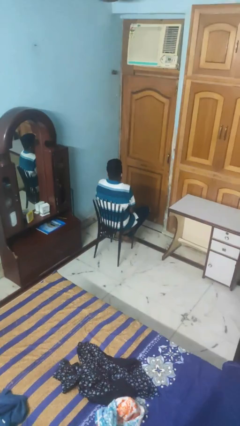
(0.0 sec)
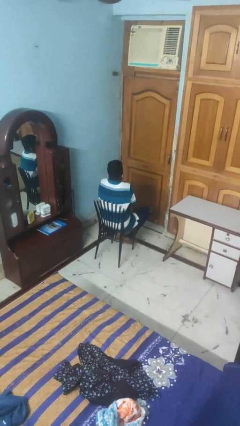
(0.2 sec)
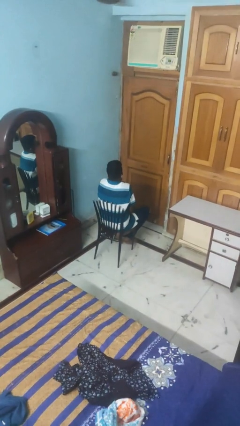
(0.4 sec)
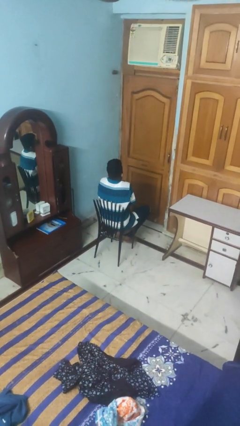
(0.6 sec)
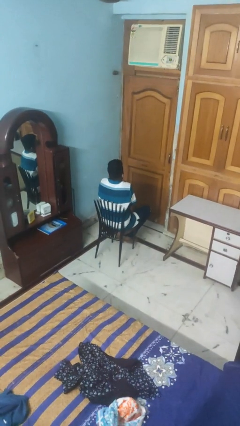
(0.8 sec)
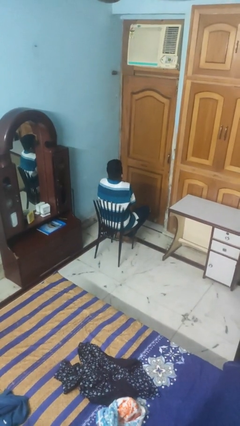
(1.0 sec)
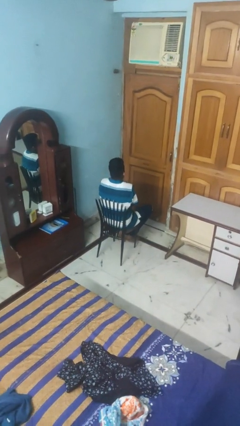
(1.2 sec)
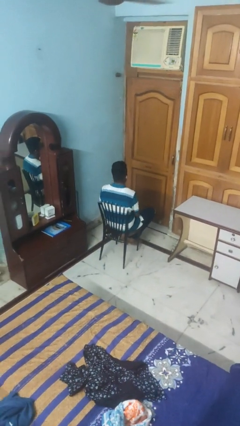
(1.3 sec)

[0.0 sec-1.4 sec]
person shrugs

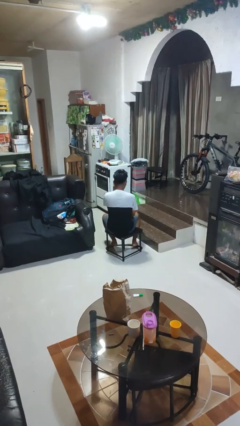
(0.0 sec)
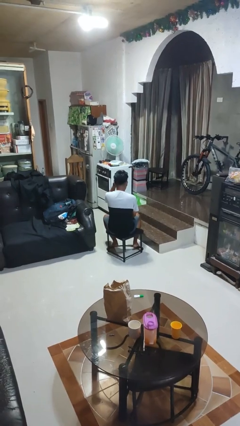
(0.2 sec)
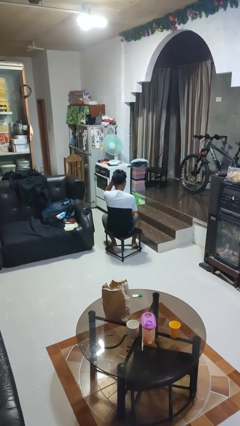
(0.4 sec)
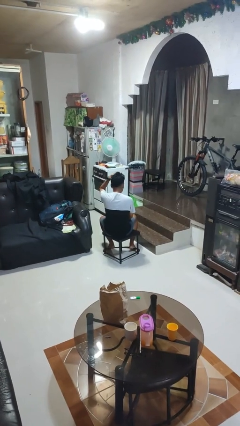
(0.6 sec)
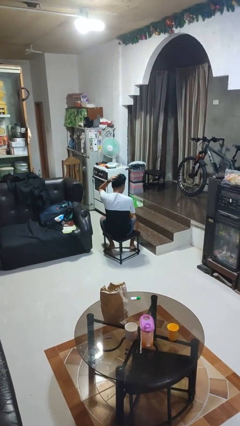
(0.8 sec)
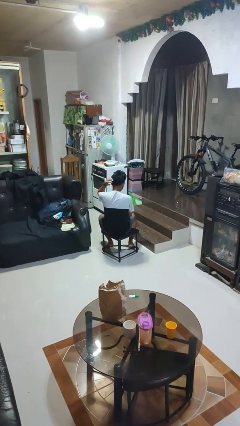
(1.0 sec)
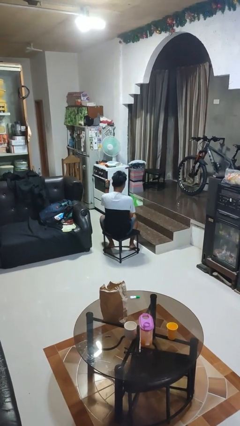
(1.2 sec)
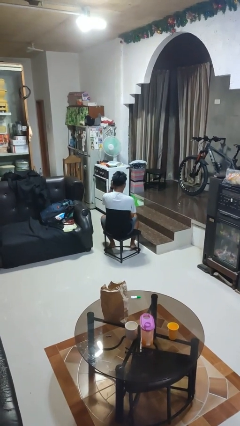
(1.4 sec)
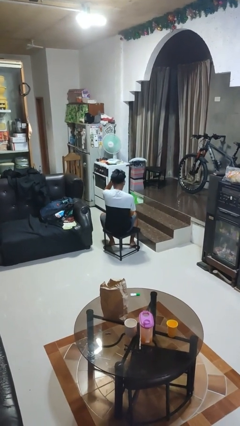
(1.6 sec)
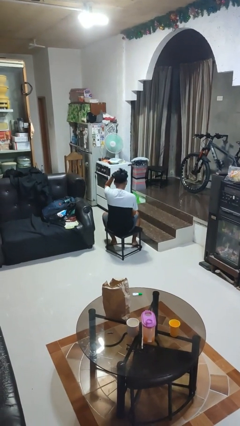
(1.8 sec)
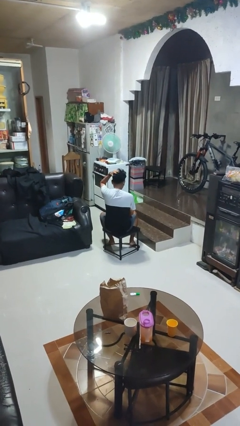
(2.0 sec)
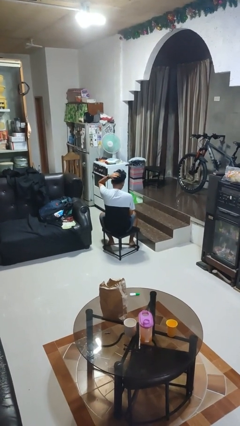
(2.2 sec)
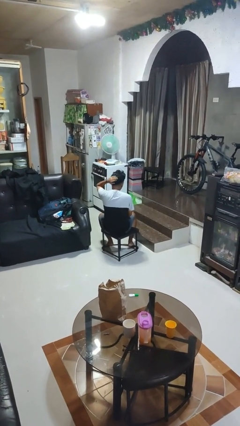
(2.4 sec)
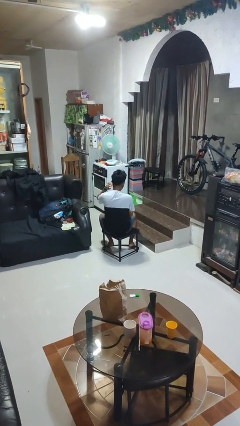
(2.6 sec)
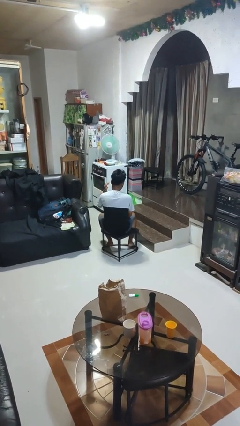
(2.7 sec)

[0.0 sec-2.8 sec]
person strokes hair

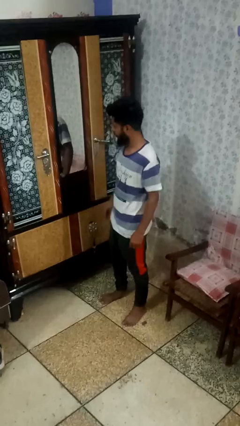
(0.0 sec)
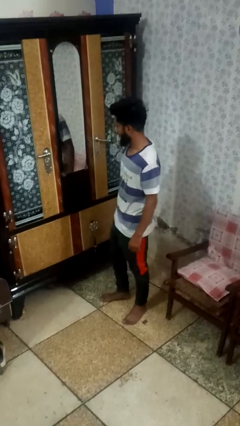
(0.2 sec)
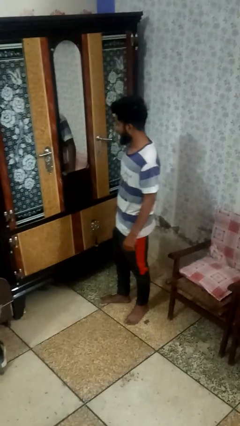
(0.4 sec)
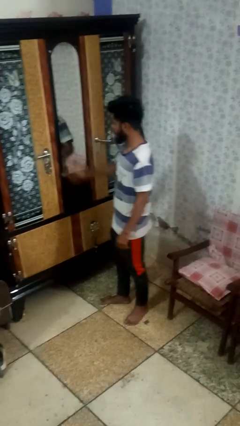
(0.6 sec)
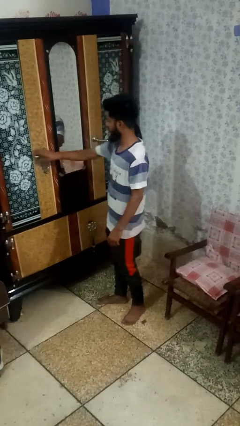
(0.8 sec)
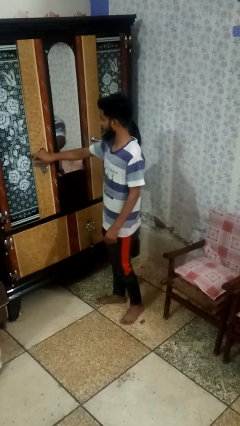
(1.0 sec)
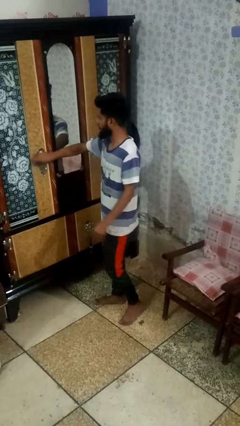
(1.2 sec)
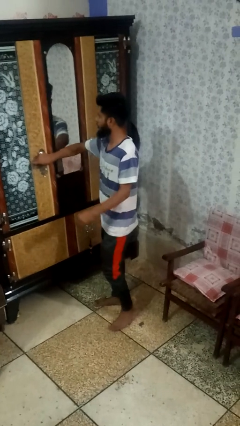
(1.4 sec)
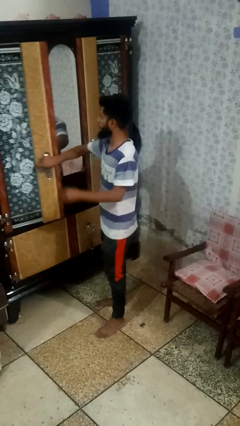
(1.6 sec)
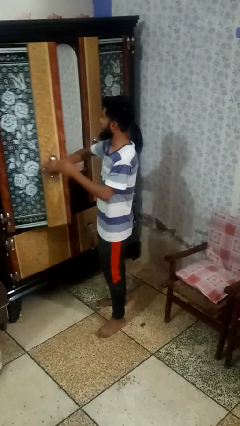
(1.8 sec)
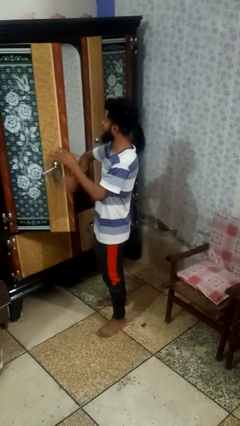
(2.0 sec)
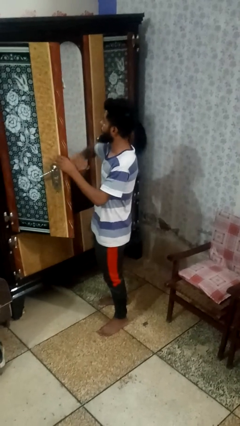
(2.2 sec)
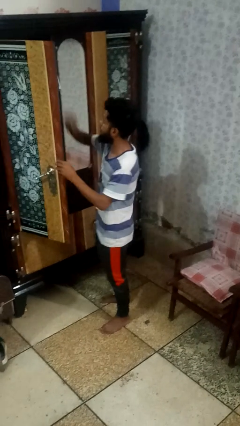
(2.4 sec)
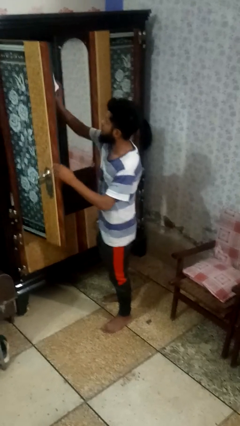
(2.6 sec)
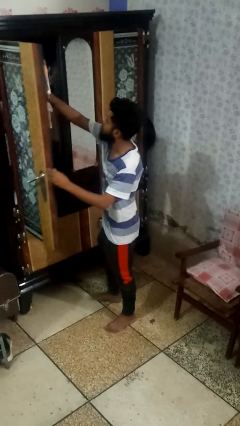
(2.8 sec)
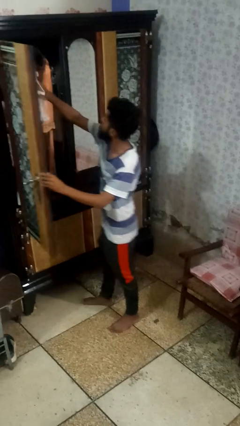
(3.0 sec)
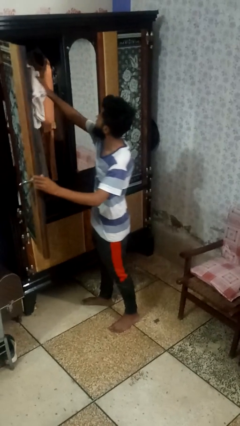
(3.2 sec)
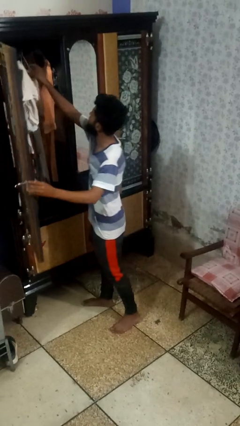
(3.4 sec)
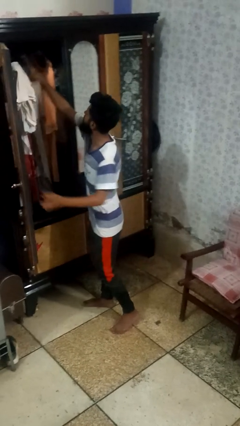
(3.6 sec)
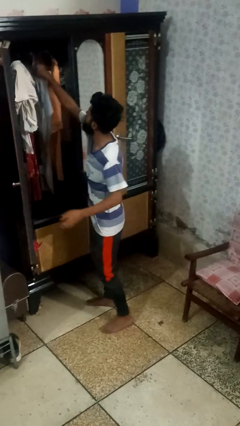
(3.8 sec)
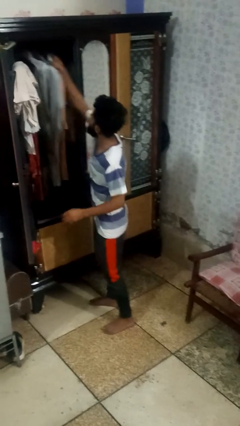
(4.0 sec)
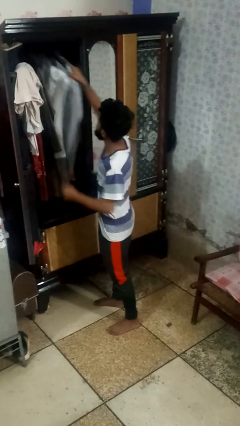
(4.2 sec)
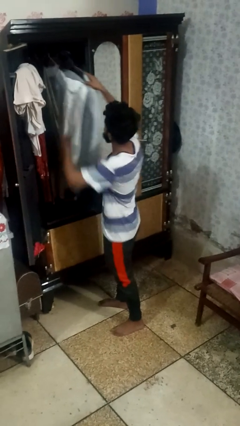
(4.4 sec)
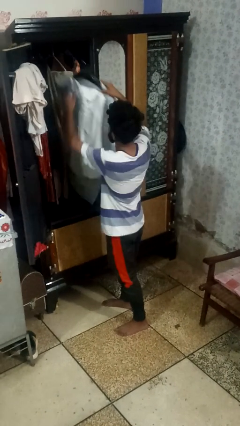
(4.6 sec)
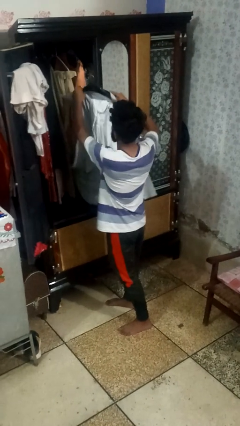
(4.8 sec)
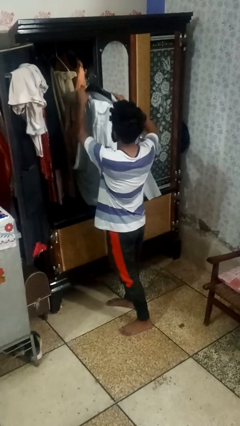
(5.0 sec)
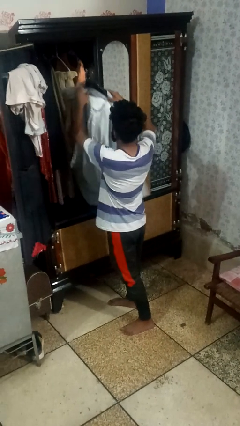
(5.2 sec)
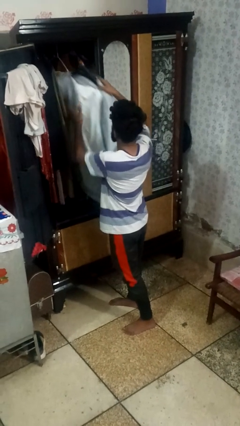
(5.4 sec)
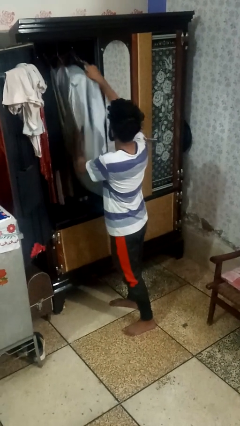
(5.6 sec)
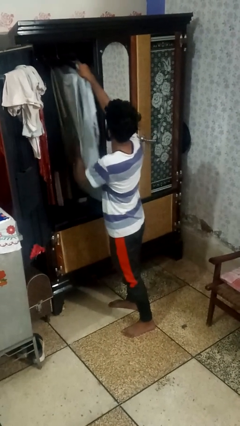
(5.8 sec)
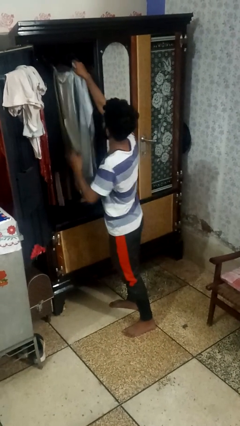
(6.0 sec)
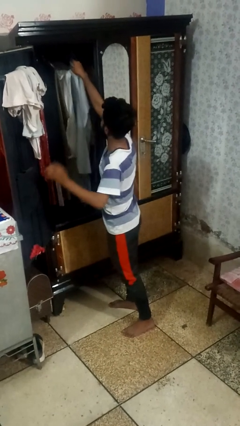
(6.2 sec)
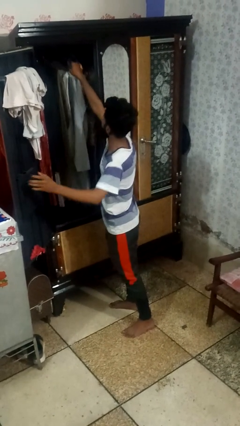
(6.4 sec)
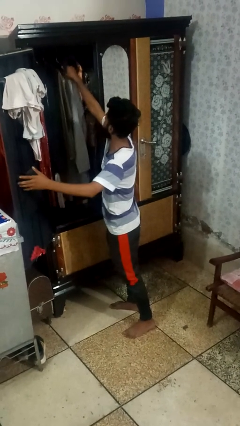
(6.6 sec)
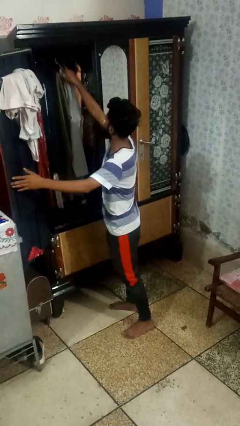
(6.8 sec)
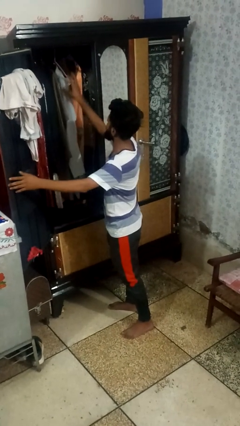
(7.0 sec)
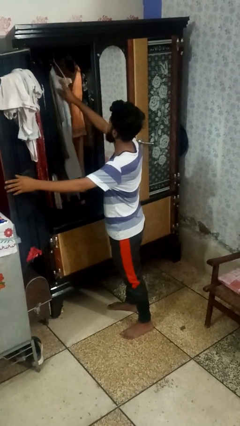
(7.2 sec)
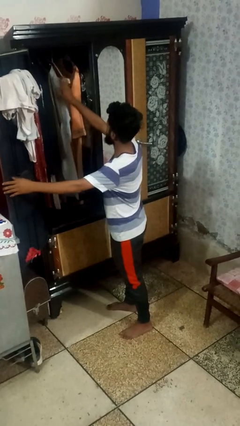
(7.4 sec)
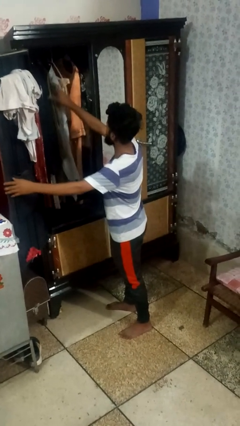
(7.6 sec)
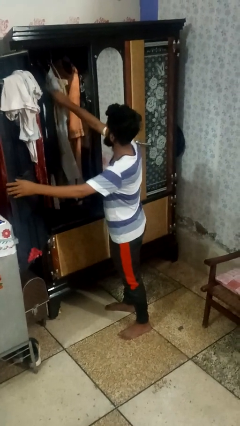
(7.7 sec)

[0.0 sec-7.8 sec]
person opens dresser drawer

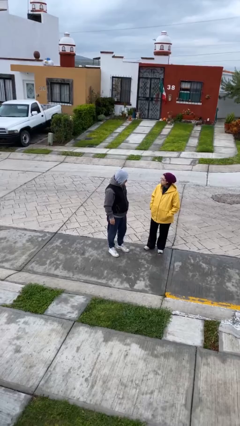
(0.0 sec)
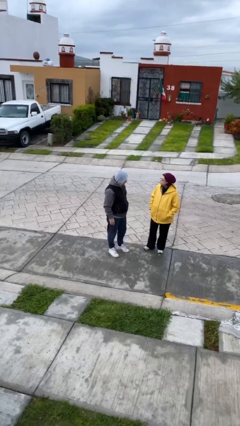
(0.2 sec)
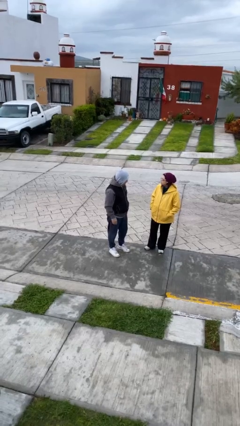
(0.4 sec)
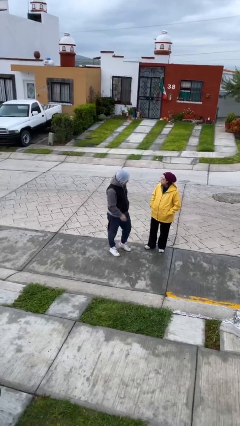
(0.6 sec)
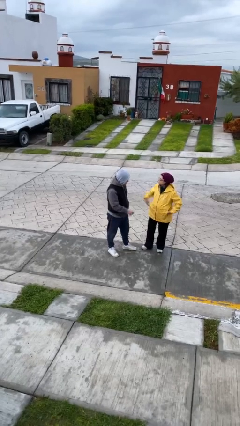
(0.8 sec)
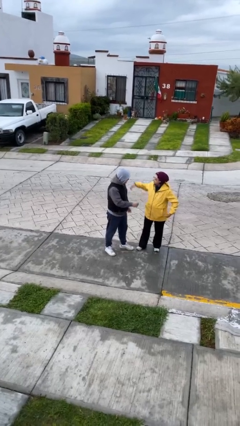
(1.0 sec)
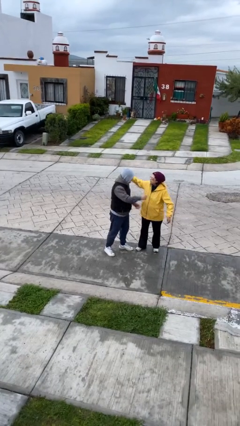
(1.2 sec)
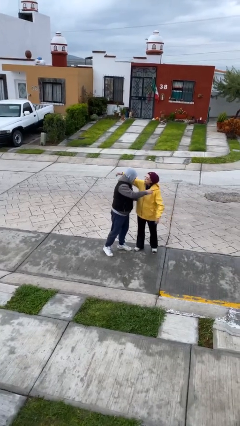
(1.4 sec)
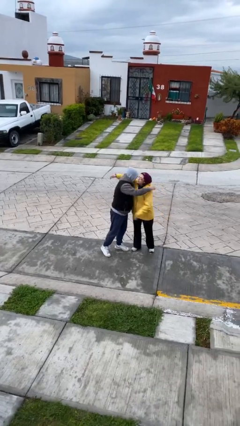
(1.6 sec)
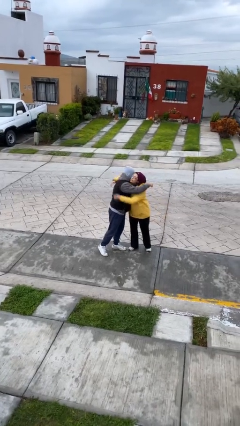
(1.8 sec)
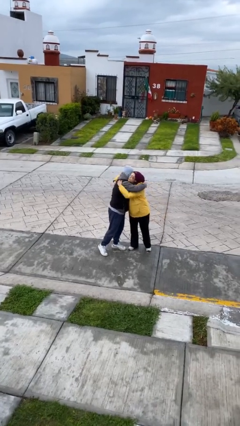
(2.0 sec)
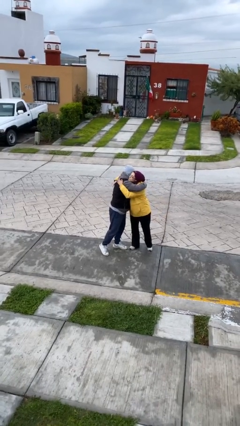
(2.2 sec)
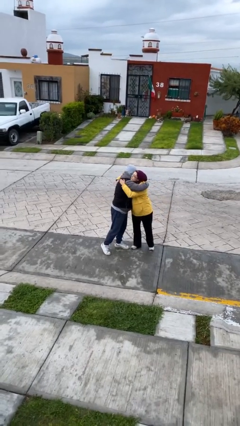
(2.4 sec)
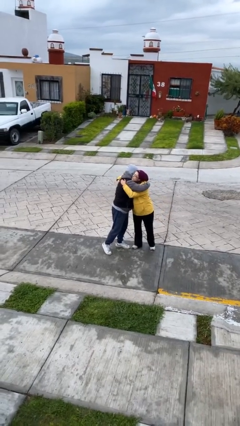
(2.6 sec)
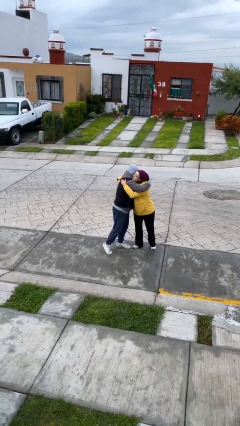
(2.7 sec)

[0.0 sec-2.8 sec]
person embraces person

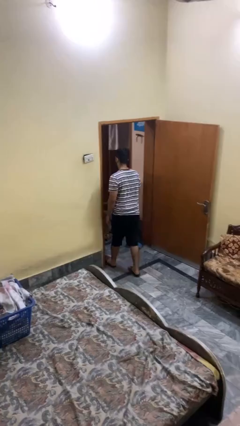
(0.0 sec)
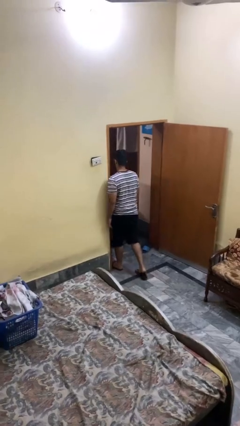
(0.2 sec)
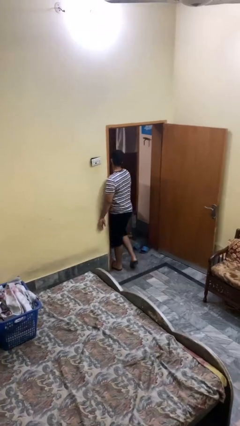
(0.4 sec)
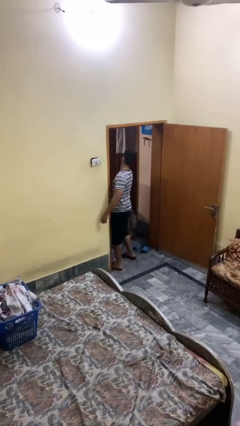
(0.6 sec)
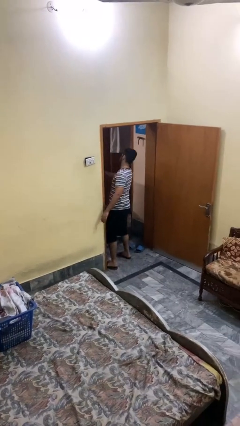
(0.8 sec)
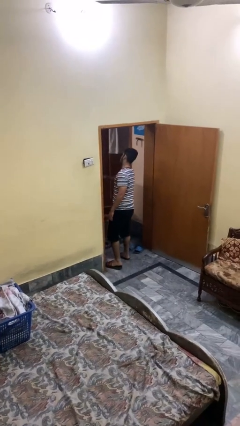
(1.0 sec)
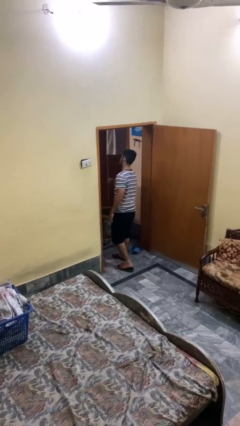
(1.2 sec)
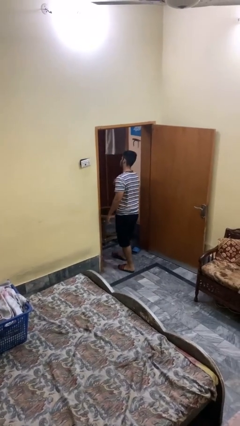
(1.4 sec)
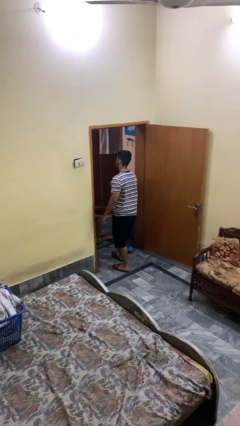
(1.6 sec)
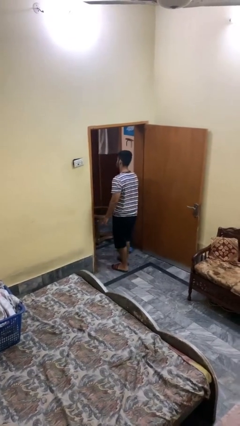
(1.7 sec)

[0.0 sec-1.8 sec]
person bumps into wall

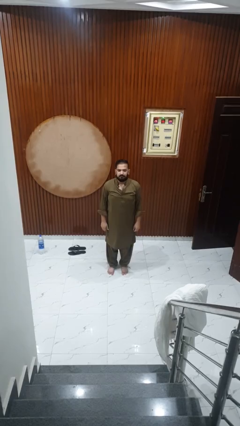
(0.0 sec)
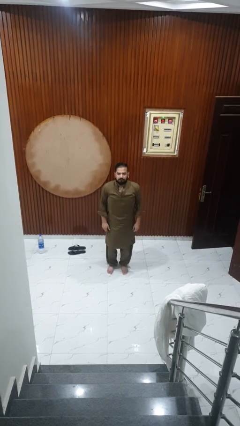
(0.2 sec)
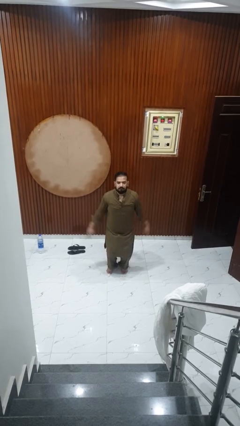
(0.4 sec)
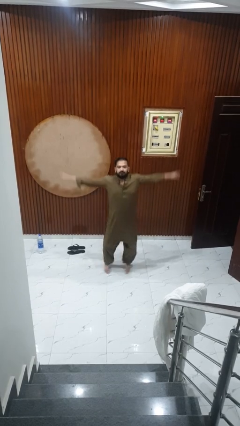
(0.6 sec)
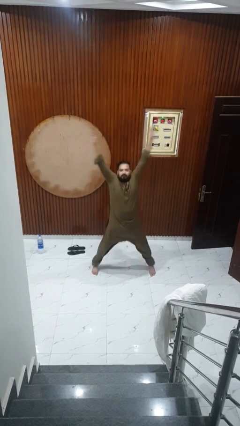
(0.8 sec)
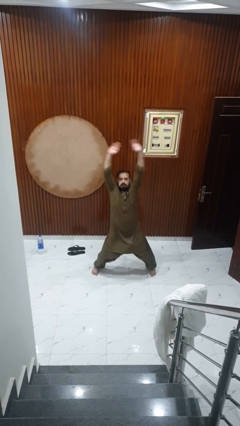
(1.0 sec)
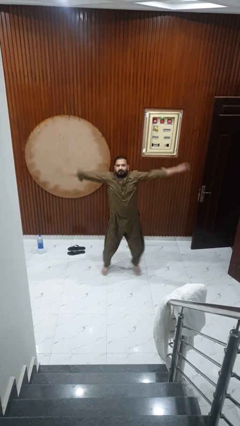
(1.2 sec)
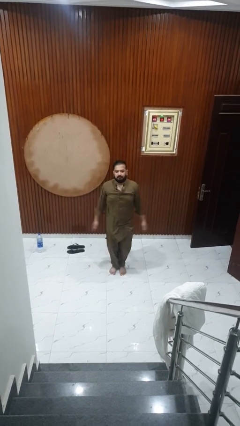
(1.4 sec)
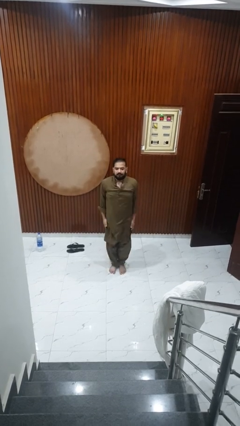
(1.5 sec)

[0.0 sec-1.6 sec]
person exercises with jumping jacks
